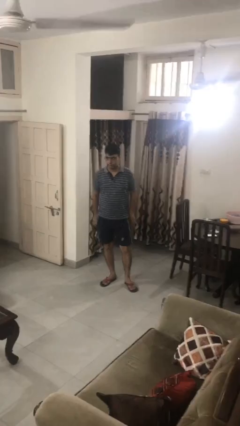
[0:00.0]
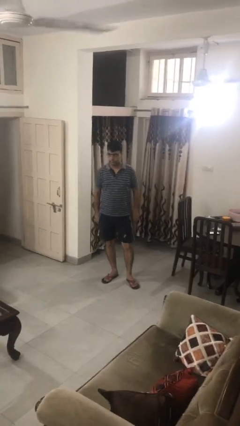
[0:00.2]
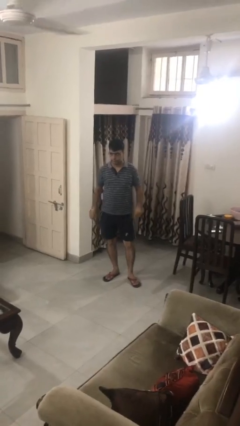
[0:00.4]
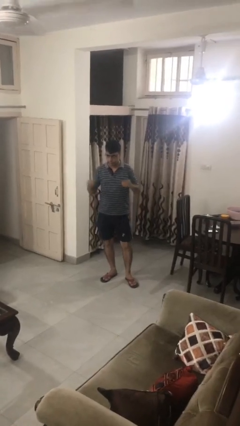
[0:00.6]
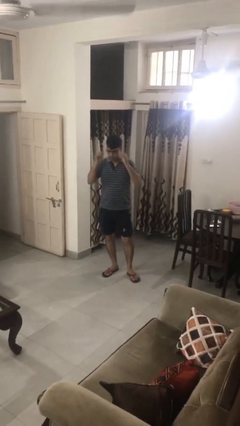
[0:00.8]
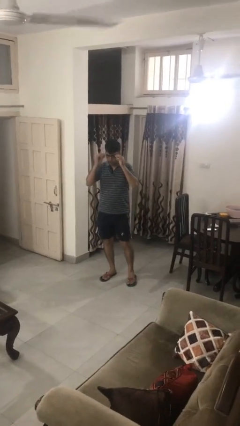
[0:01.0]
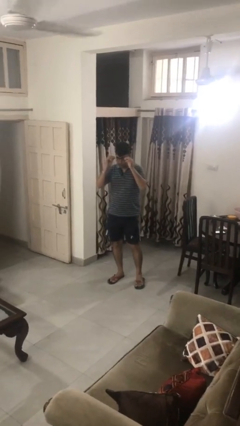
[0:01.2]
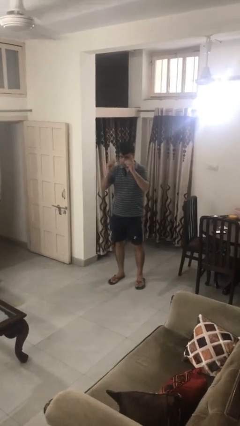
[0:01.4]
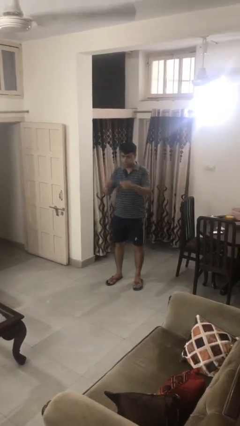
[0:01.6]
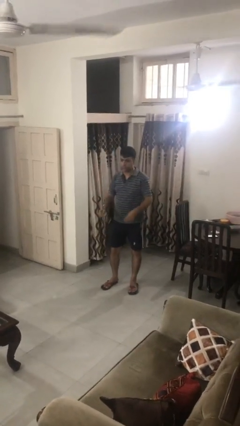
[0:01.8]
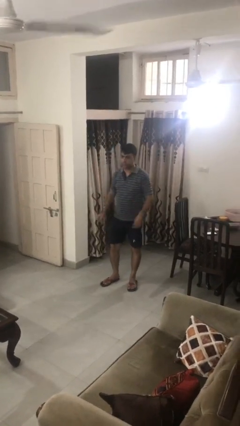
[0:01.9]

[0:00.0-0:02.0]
person takes off glasses

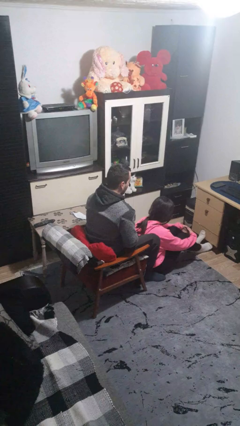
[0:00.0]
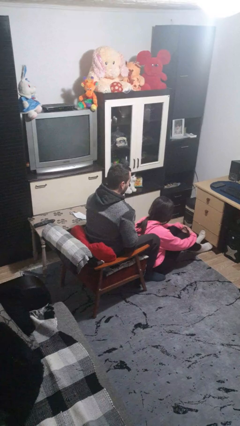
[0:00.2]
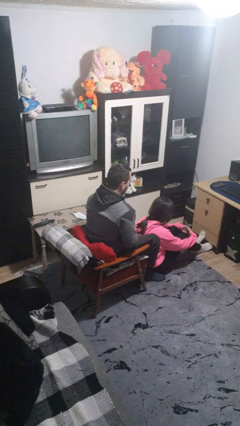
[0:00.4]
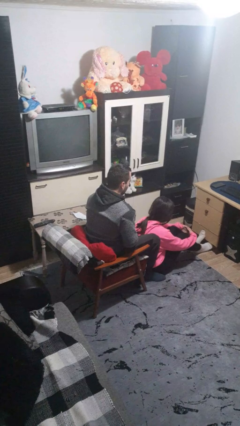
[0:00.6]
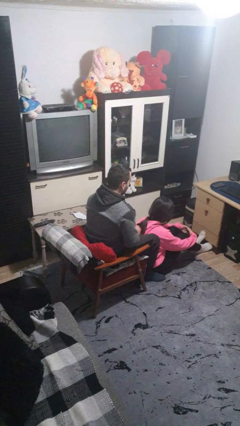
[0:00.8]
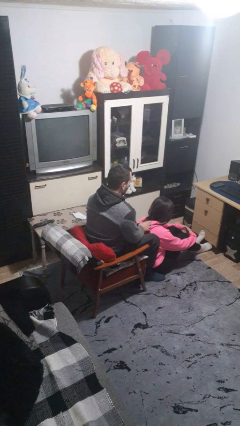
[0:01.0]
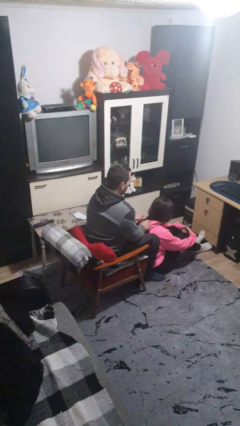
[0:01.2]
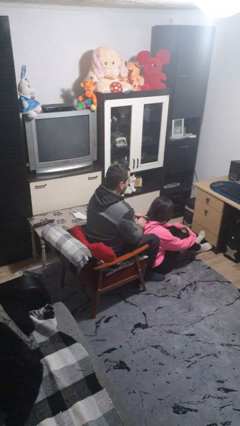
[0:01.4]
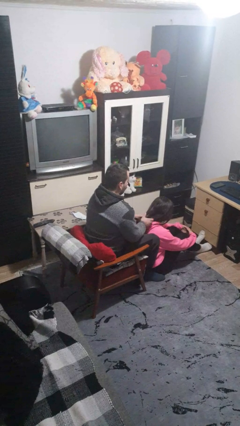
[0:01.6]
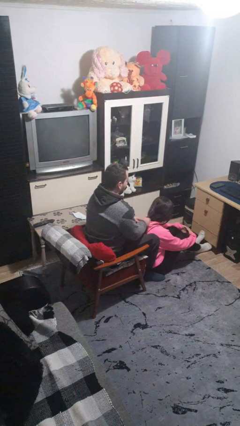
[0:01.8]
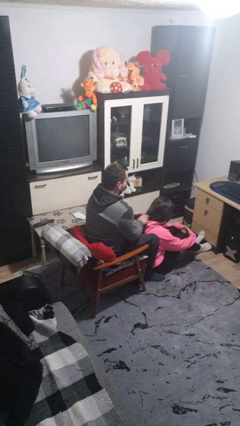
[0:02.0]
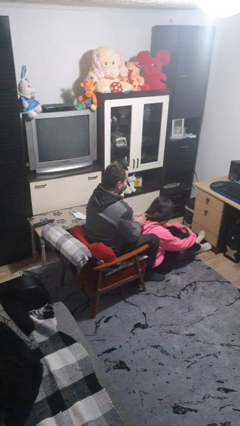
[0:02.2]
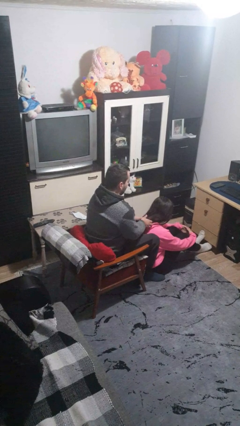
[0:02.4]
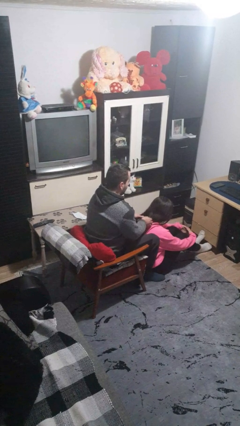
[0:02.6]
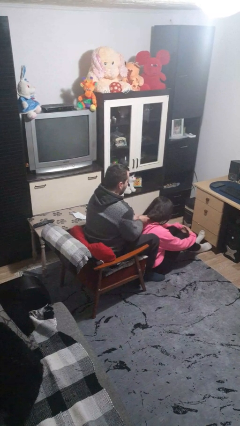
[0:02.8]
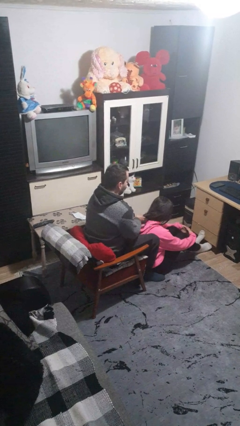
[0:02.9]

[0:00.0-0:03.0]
person braids hair of person

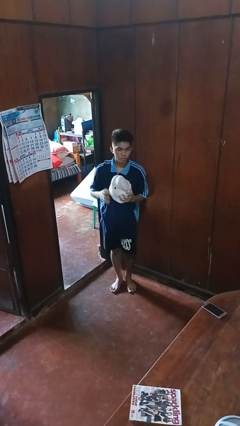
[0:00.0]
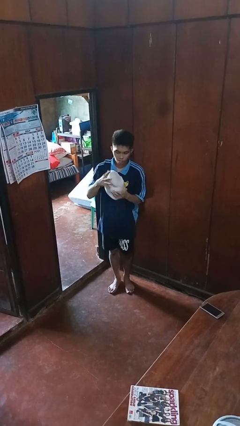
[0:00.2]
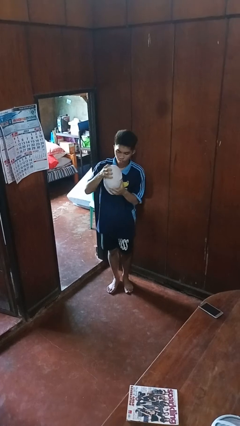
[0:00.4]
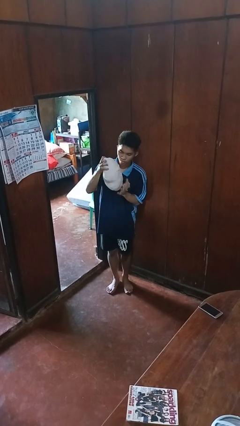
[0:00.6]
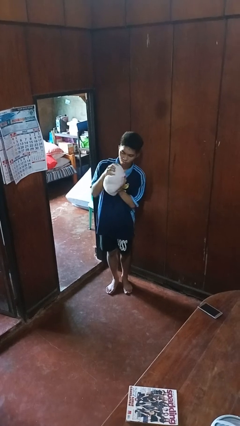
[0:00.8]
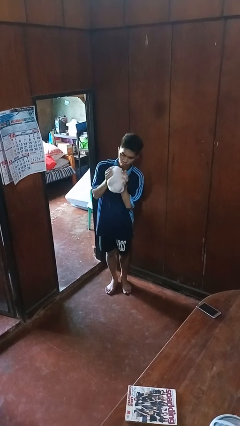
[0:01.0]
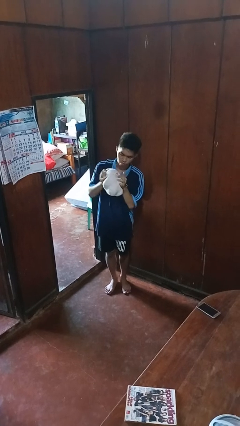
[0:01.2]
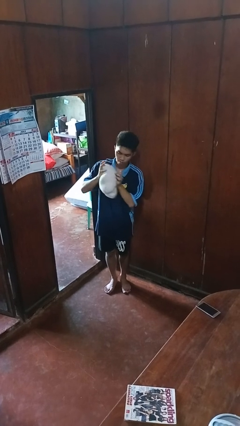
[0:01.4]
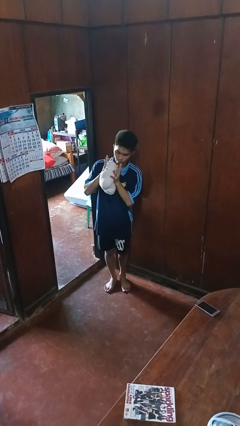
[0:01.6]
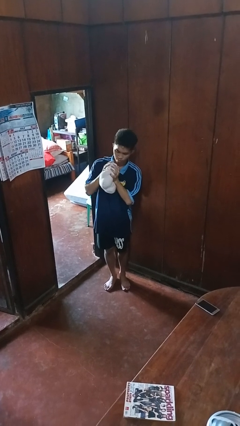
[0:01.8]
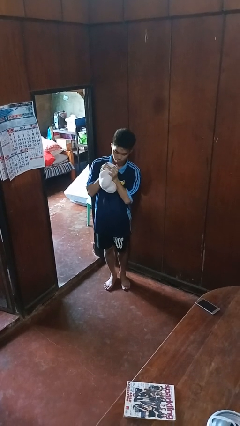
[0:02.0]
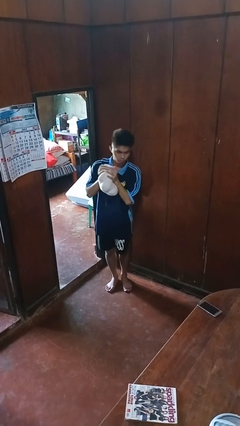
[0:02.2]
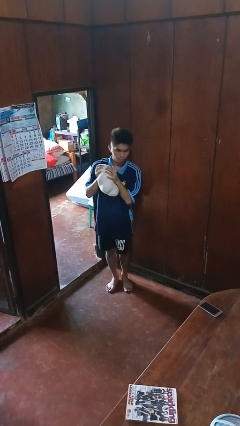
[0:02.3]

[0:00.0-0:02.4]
person squeezes object

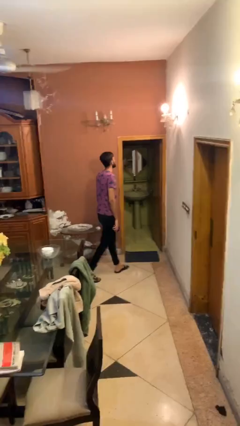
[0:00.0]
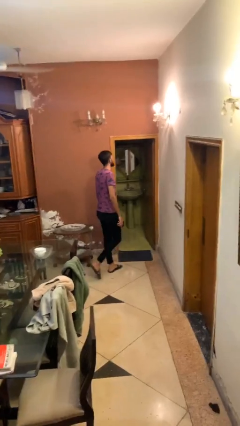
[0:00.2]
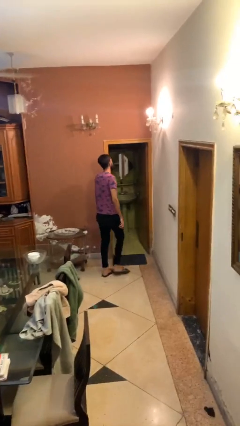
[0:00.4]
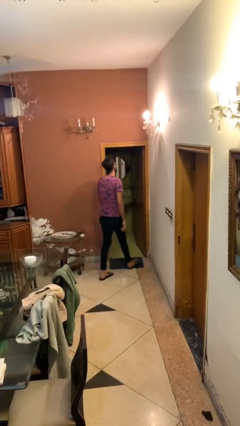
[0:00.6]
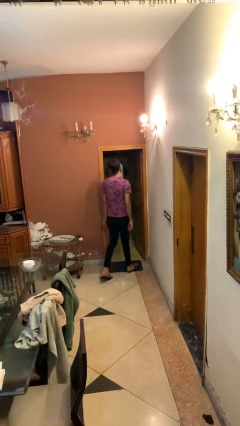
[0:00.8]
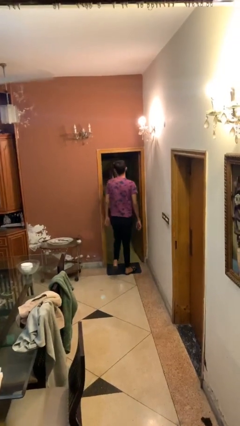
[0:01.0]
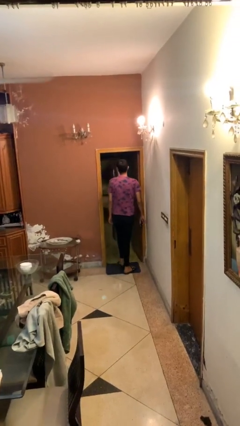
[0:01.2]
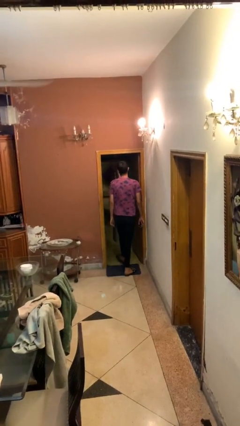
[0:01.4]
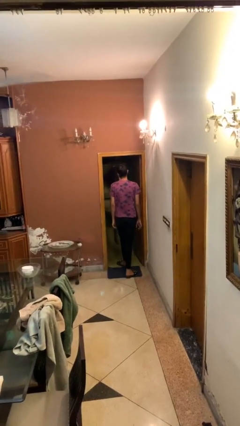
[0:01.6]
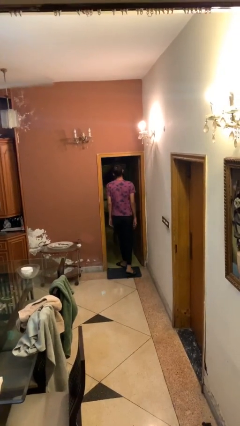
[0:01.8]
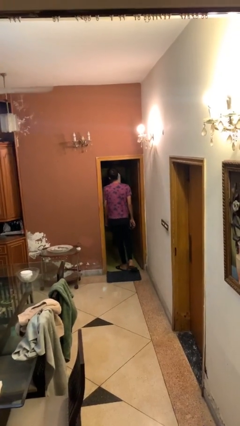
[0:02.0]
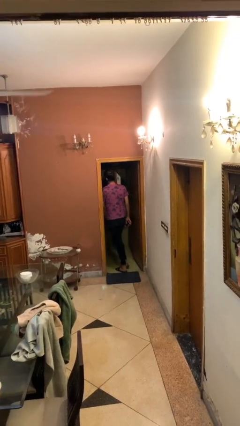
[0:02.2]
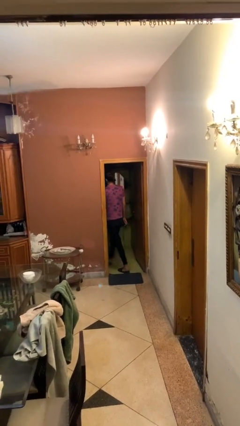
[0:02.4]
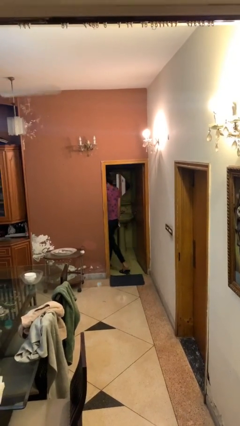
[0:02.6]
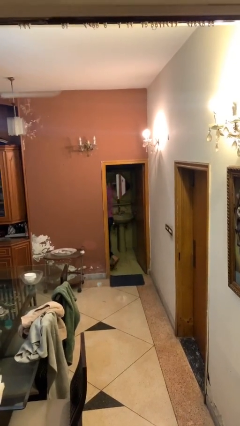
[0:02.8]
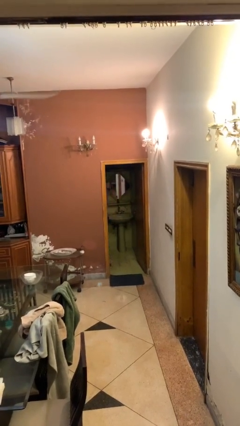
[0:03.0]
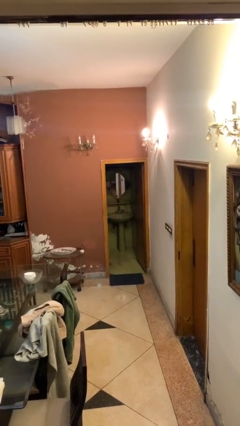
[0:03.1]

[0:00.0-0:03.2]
person exits scene through structure

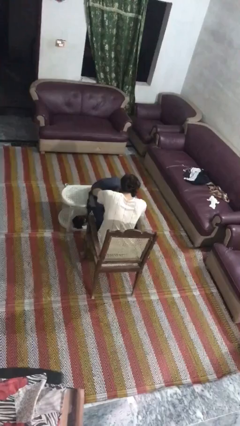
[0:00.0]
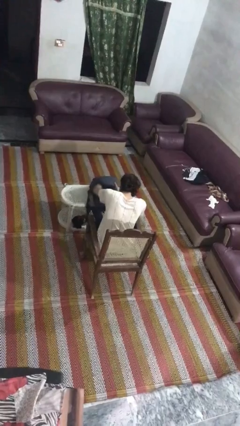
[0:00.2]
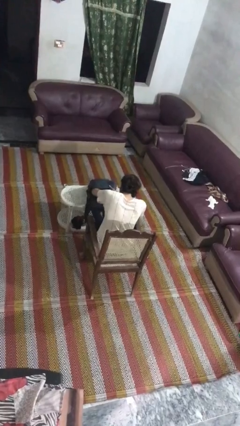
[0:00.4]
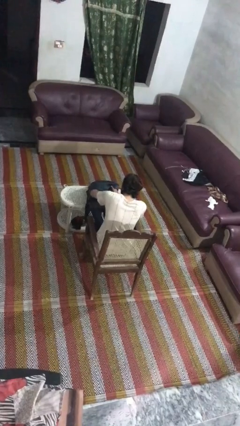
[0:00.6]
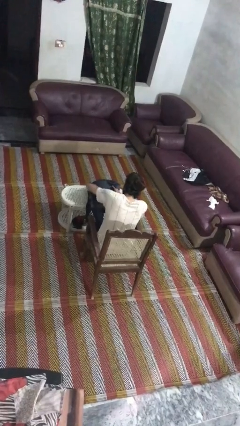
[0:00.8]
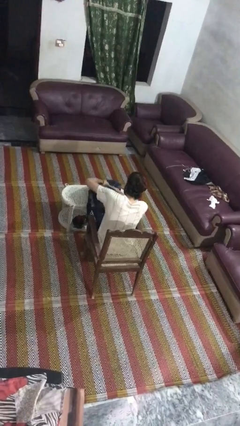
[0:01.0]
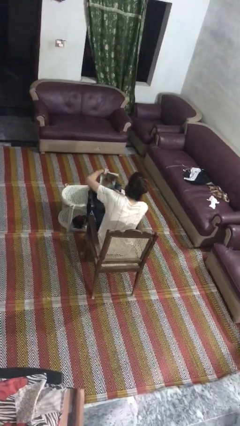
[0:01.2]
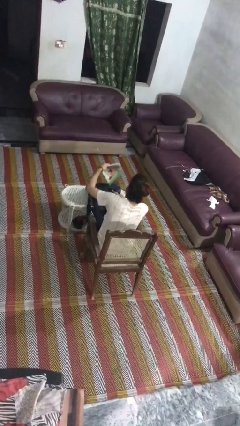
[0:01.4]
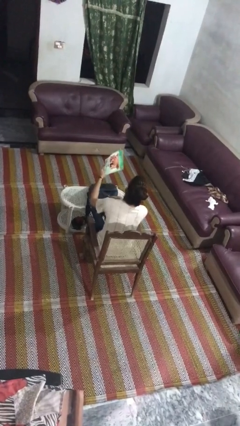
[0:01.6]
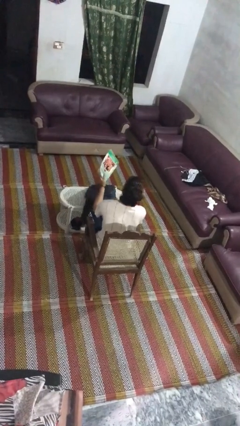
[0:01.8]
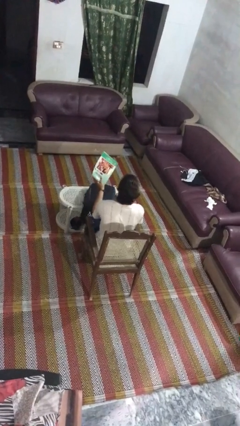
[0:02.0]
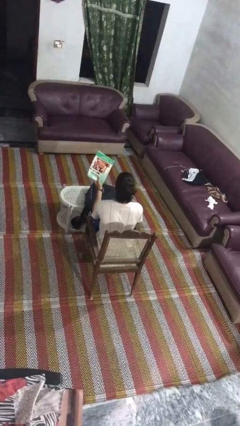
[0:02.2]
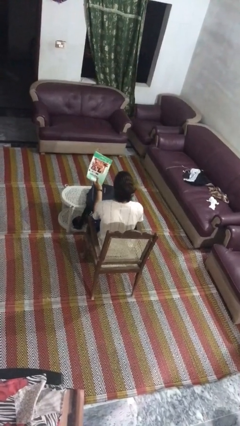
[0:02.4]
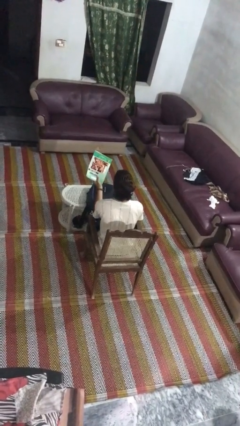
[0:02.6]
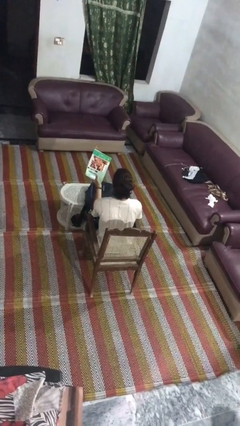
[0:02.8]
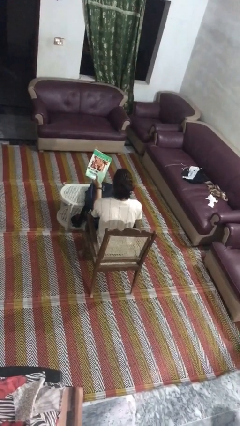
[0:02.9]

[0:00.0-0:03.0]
person takes object from backpack

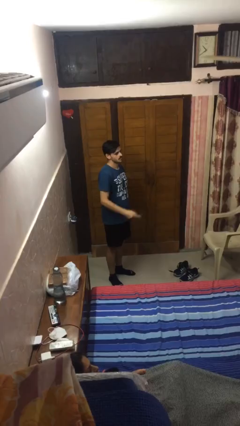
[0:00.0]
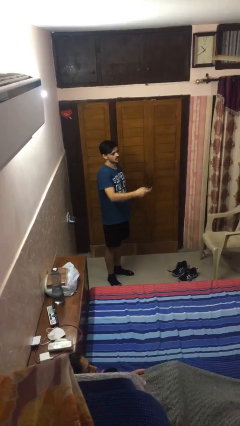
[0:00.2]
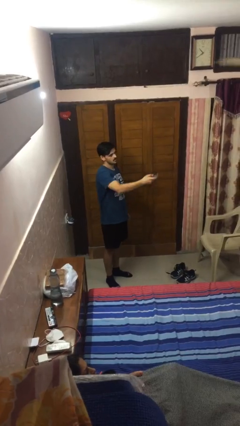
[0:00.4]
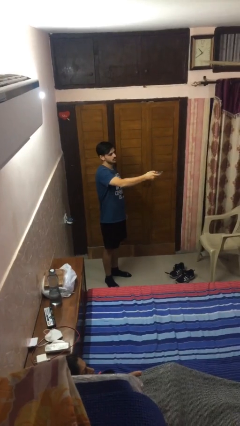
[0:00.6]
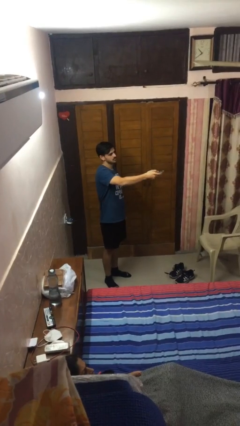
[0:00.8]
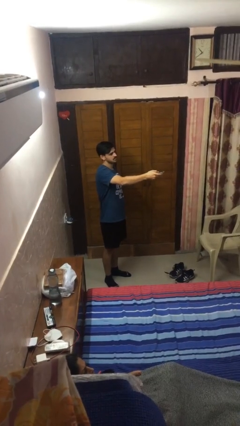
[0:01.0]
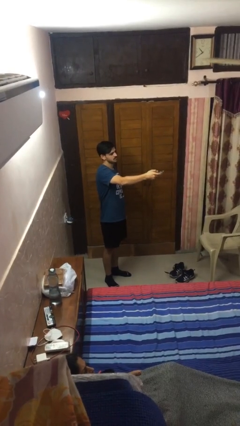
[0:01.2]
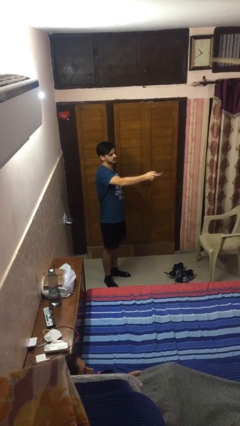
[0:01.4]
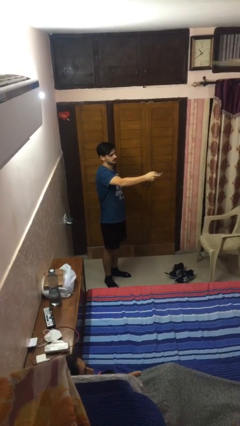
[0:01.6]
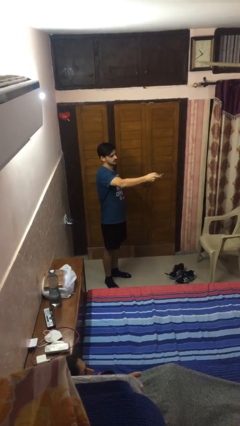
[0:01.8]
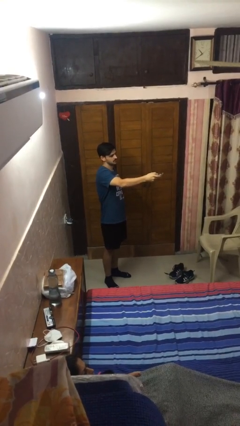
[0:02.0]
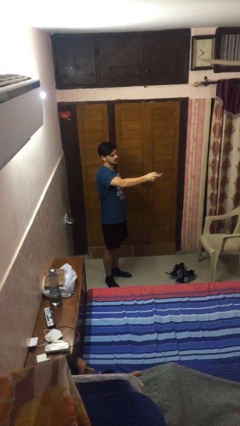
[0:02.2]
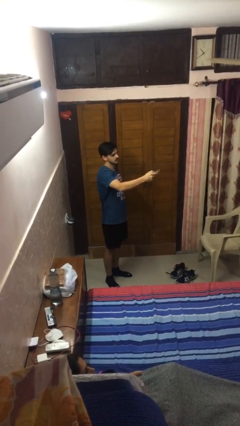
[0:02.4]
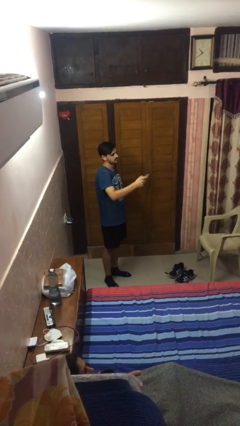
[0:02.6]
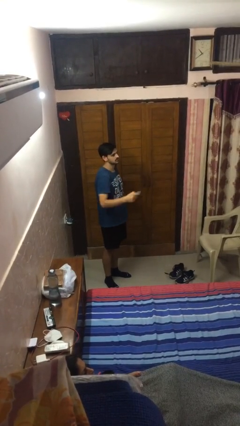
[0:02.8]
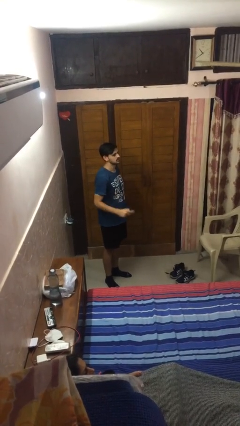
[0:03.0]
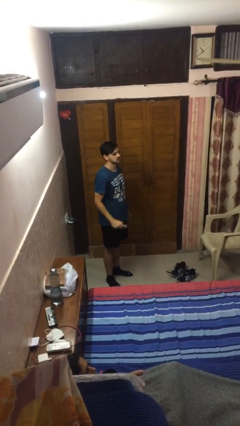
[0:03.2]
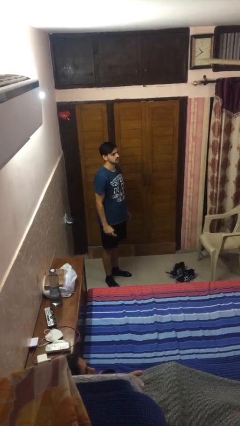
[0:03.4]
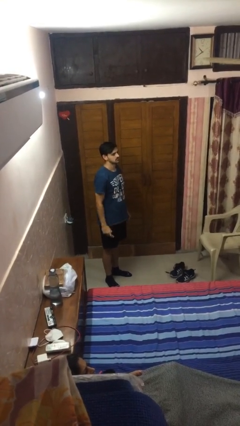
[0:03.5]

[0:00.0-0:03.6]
person uses television remote
